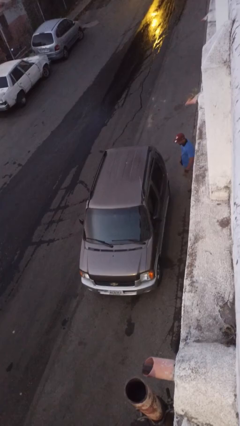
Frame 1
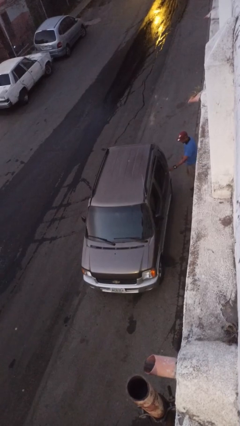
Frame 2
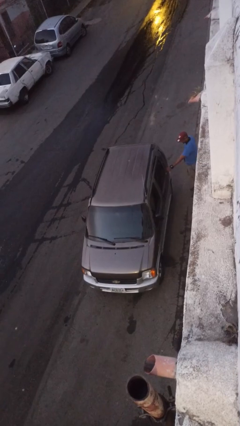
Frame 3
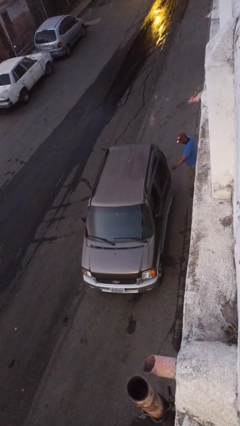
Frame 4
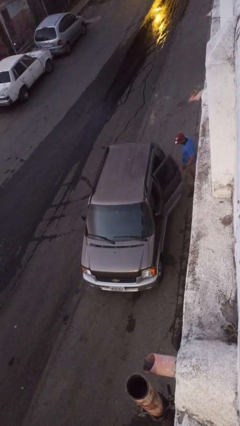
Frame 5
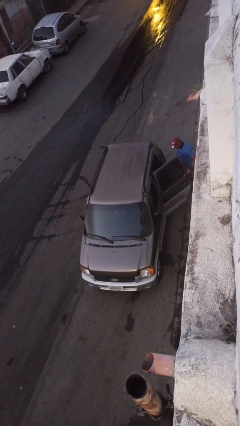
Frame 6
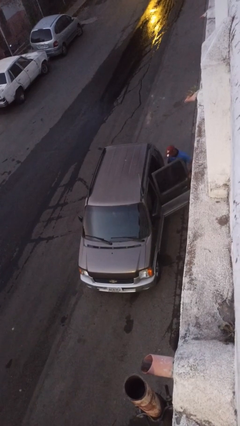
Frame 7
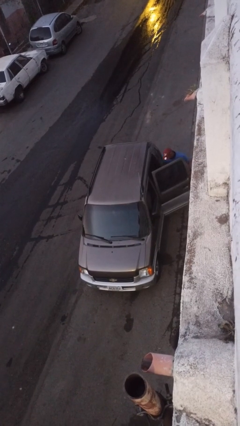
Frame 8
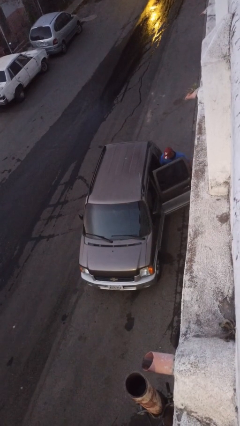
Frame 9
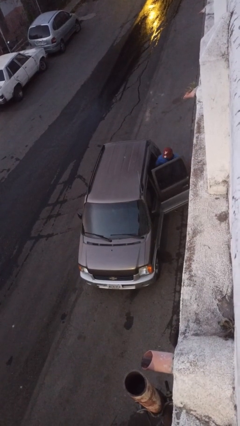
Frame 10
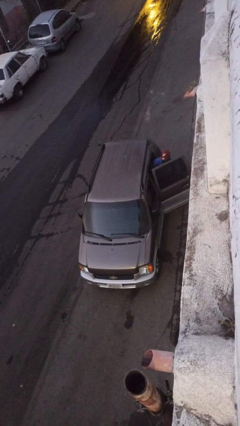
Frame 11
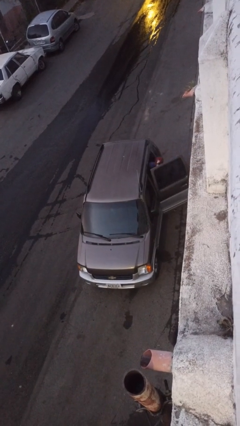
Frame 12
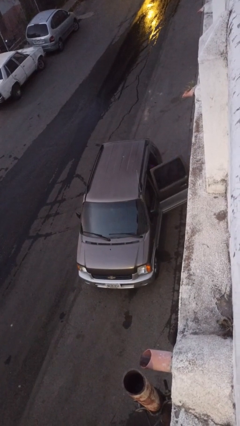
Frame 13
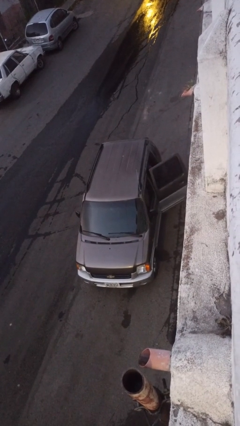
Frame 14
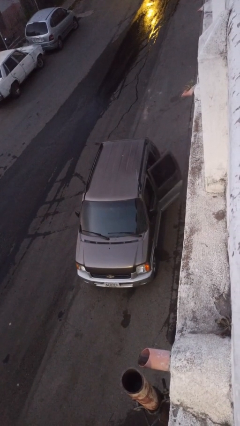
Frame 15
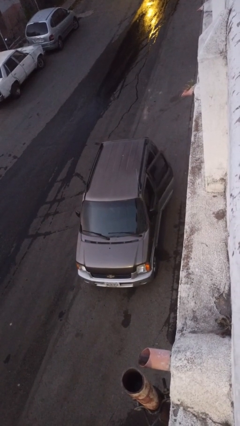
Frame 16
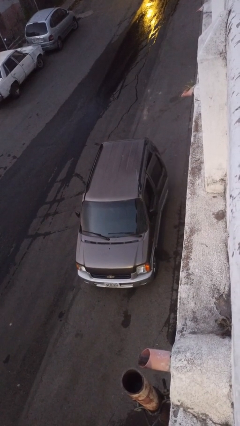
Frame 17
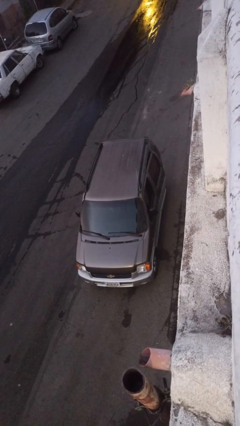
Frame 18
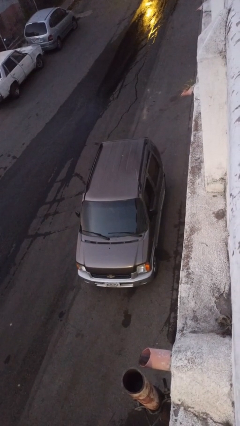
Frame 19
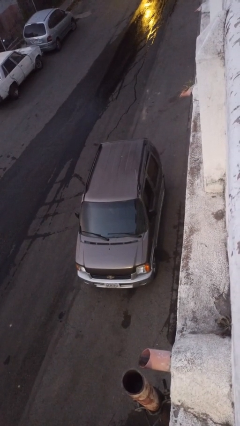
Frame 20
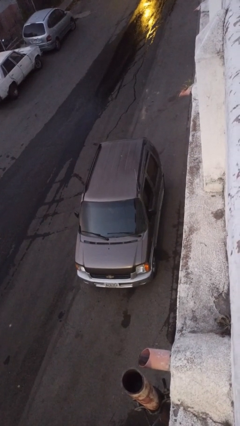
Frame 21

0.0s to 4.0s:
car picks up person

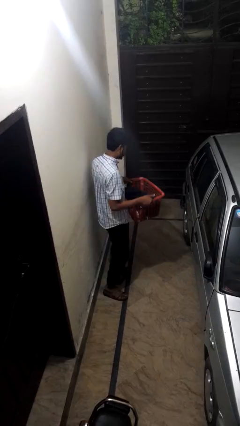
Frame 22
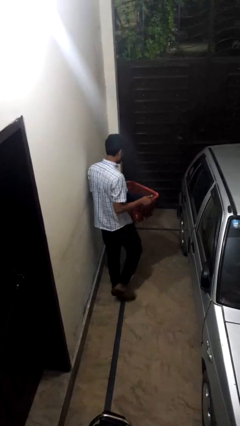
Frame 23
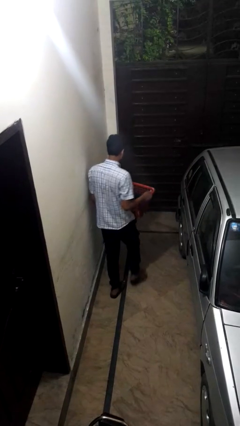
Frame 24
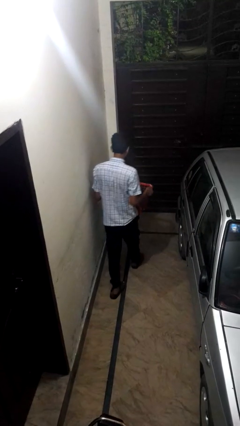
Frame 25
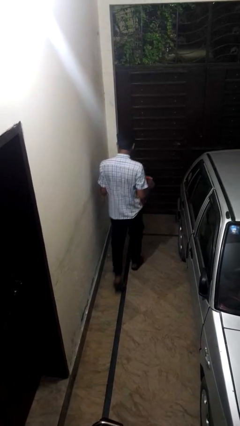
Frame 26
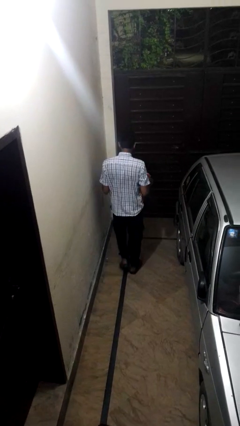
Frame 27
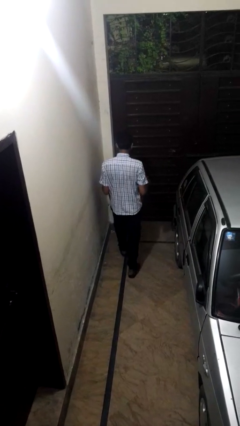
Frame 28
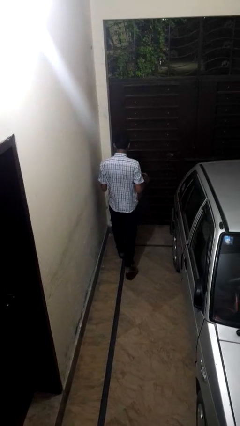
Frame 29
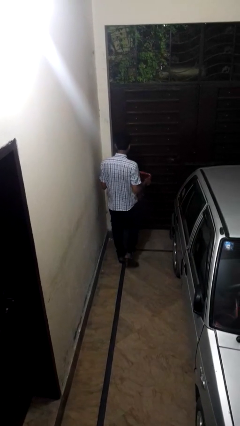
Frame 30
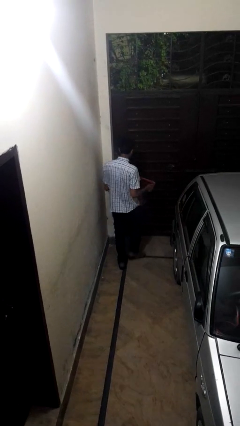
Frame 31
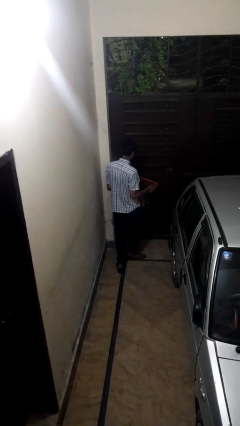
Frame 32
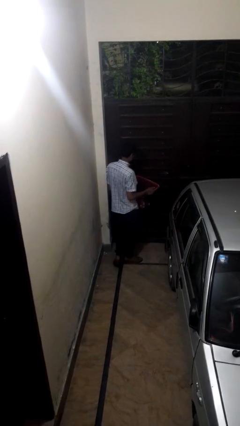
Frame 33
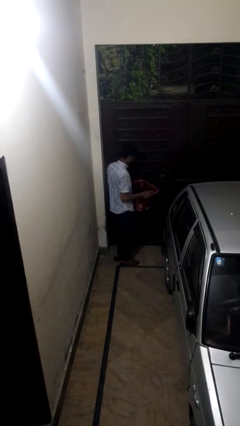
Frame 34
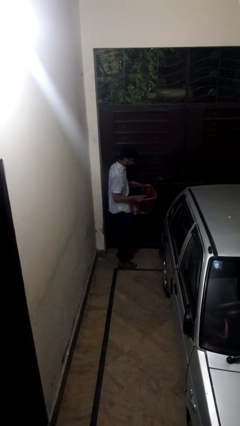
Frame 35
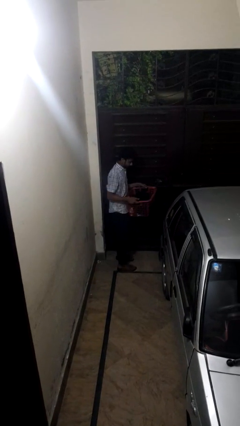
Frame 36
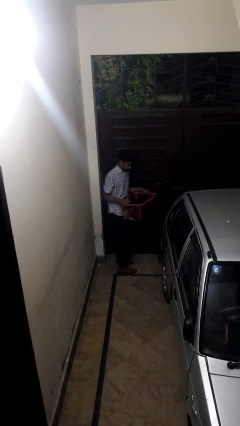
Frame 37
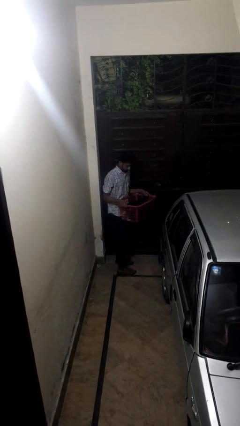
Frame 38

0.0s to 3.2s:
person carries laundry basket

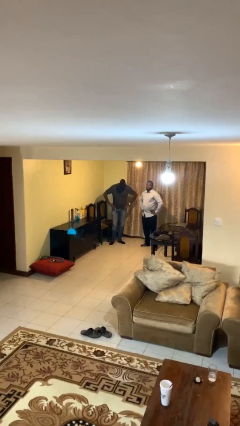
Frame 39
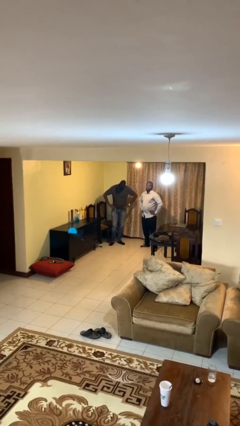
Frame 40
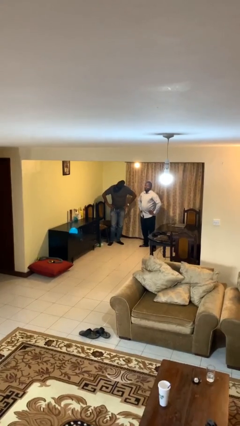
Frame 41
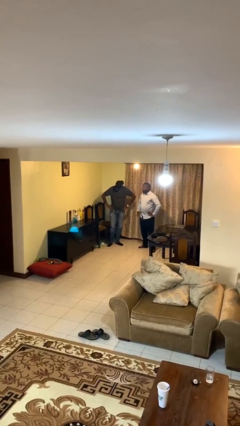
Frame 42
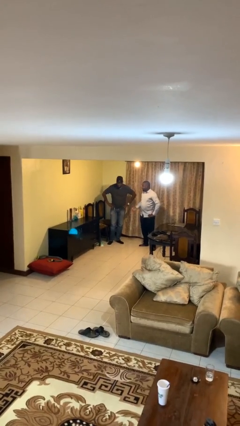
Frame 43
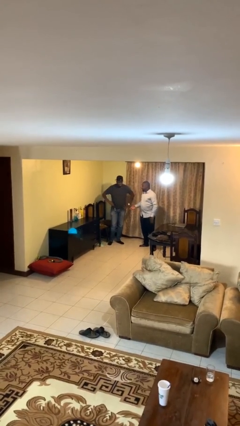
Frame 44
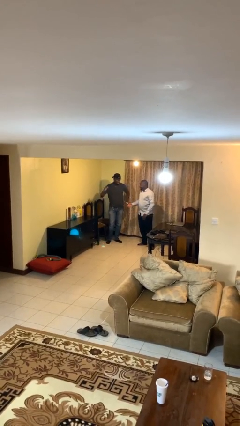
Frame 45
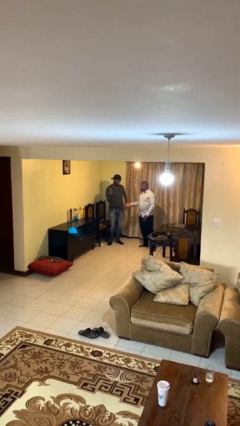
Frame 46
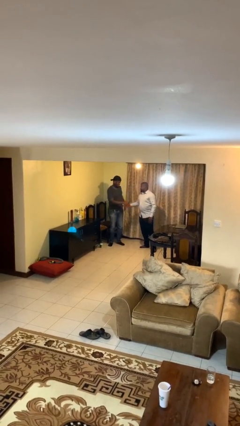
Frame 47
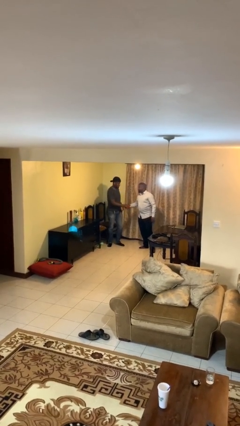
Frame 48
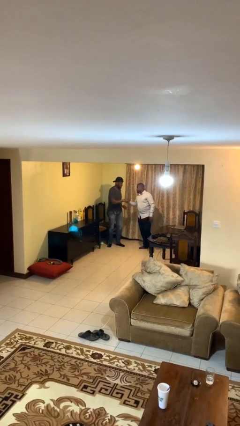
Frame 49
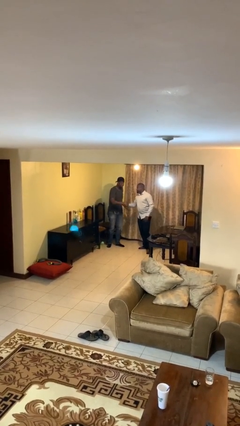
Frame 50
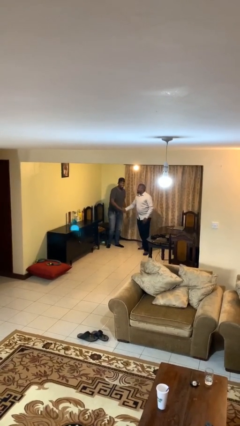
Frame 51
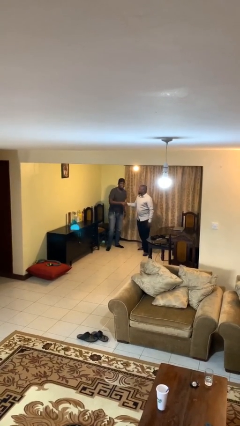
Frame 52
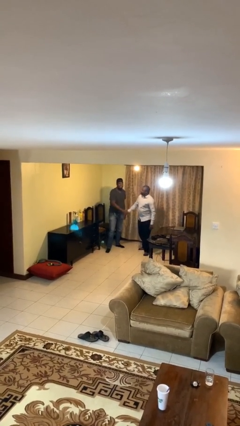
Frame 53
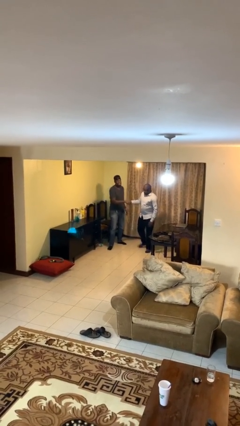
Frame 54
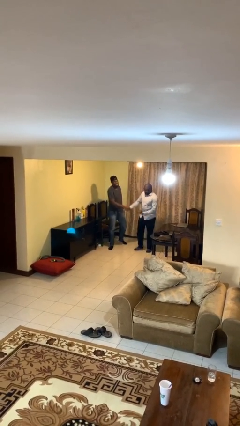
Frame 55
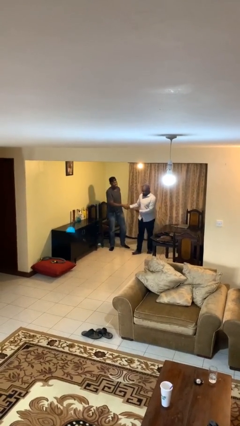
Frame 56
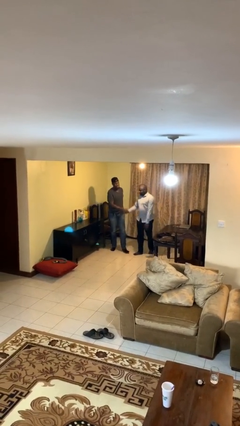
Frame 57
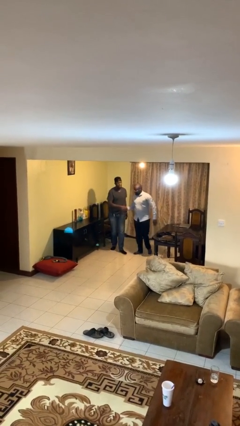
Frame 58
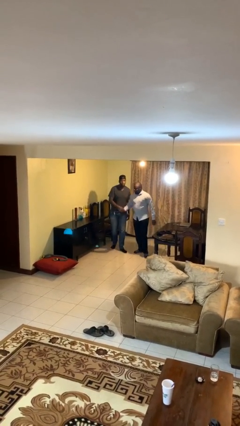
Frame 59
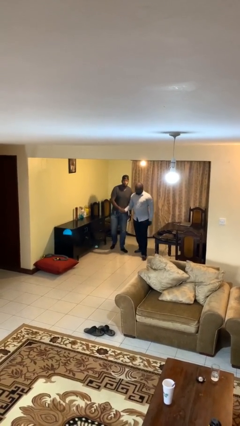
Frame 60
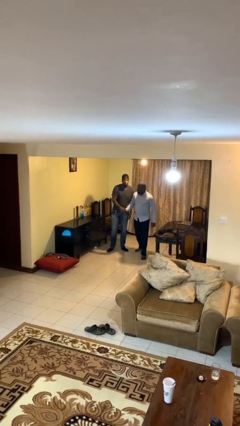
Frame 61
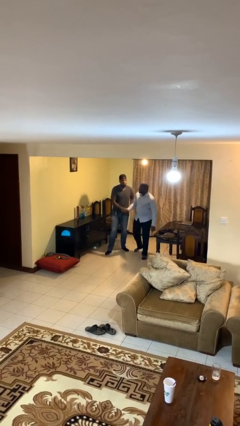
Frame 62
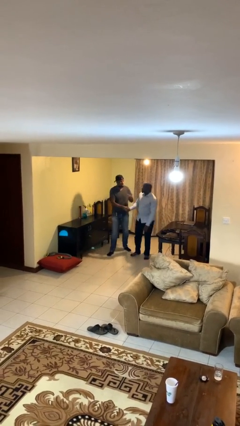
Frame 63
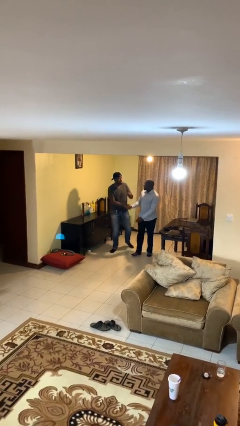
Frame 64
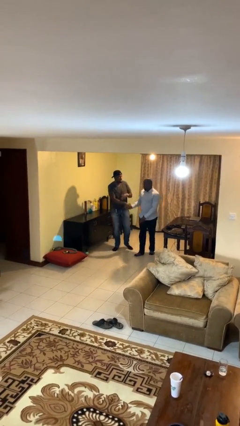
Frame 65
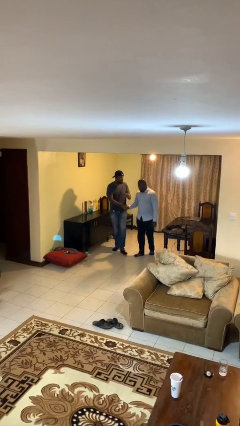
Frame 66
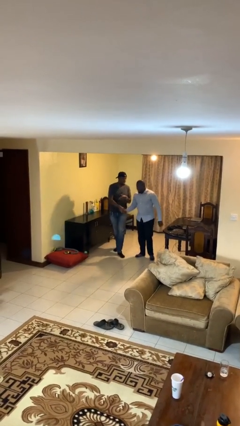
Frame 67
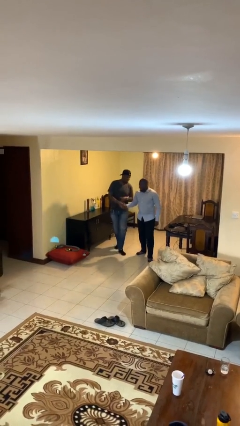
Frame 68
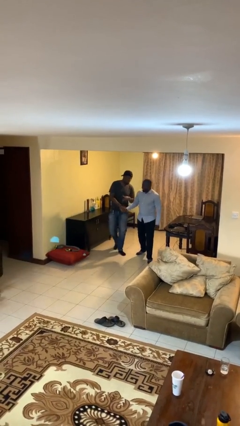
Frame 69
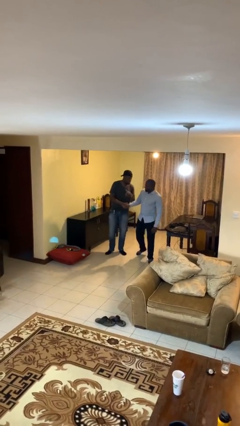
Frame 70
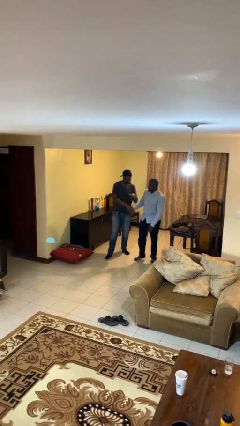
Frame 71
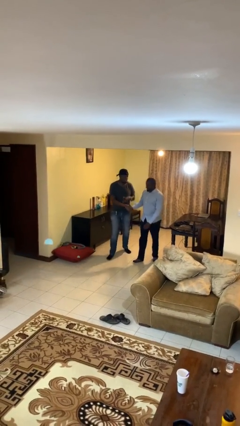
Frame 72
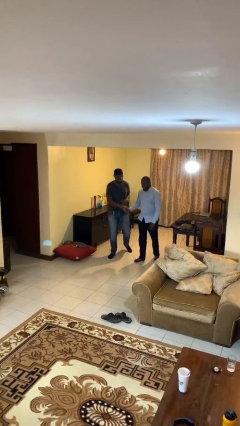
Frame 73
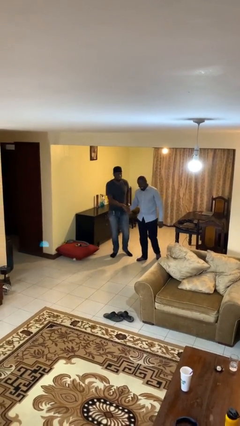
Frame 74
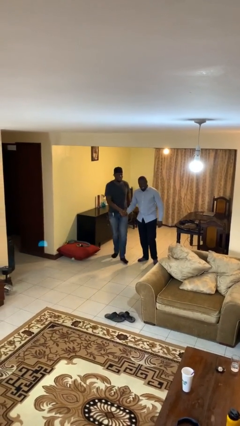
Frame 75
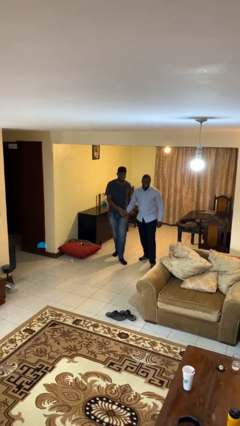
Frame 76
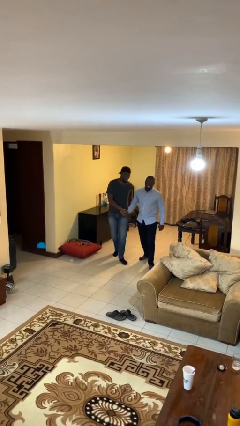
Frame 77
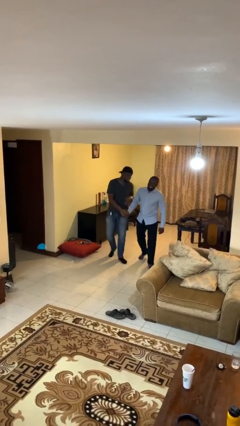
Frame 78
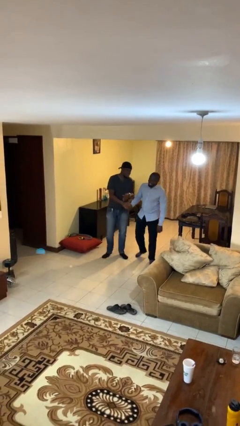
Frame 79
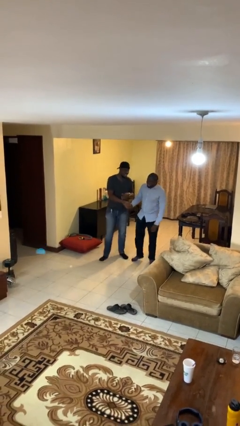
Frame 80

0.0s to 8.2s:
person holds hand

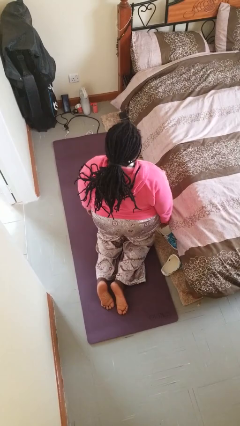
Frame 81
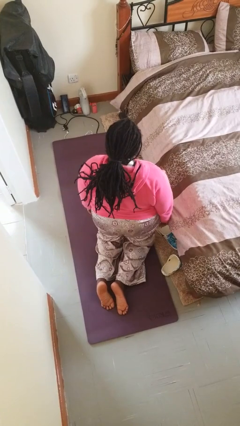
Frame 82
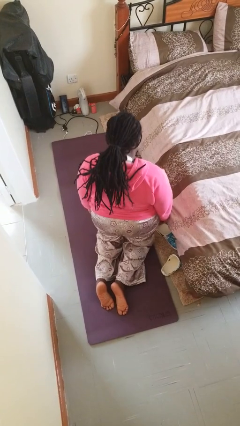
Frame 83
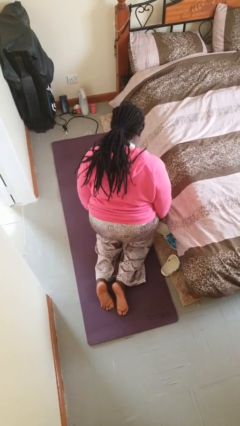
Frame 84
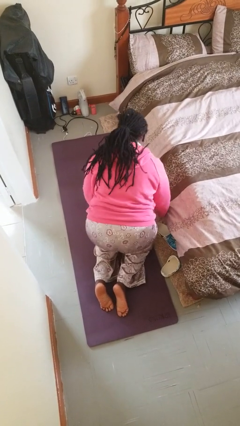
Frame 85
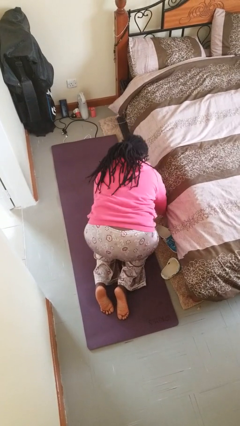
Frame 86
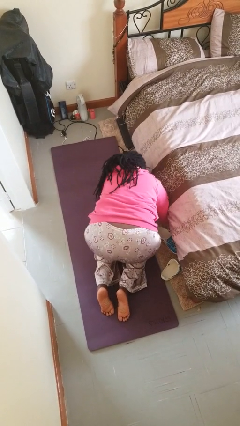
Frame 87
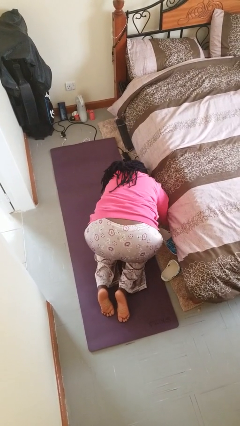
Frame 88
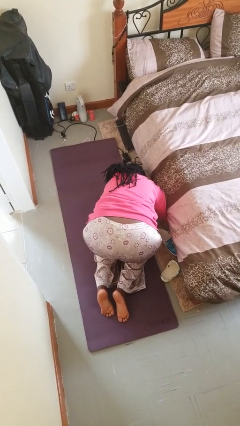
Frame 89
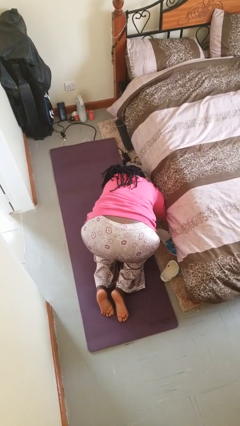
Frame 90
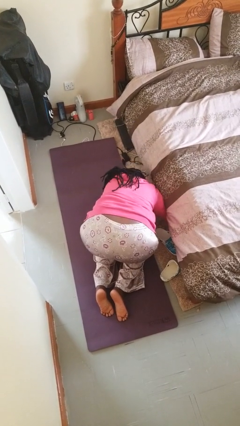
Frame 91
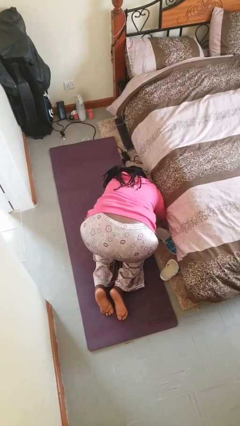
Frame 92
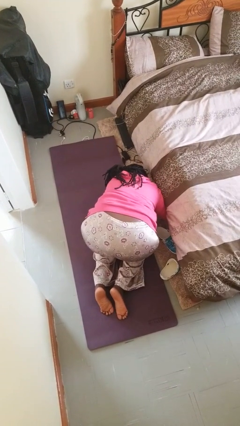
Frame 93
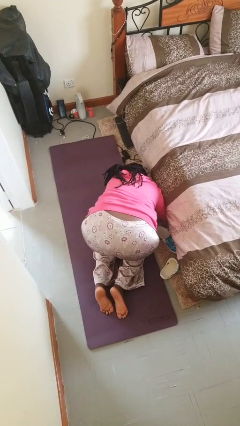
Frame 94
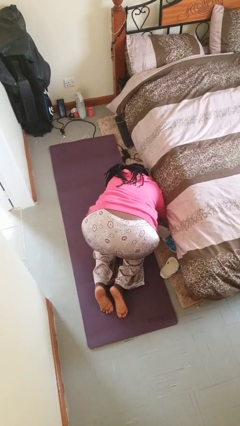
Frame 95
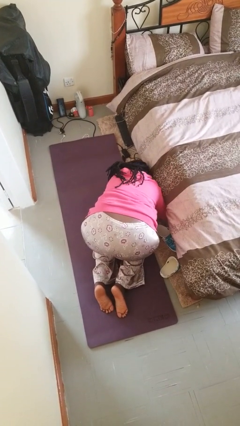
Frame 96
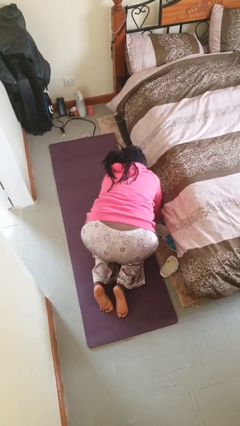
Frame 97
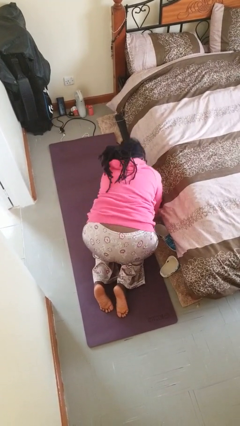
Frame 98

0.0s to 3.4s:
person searches under bed
